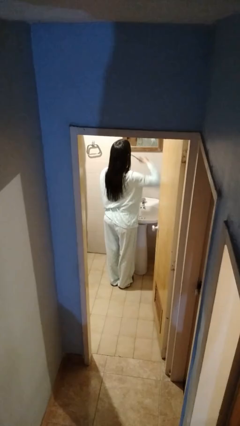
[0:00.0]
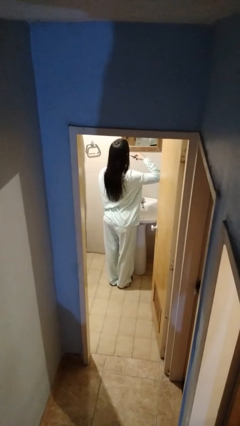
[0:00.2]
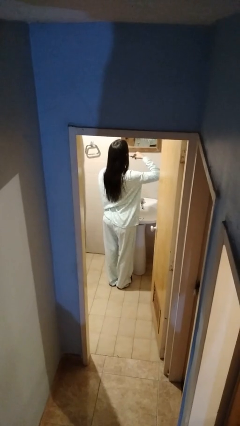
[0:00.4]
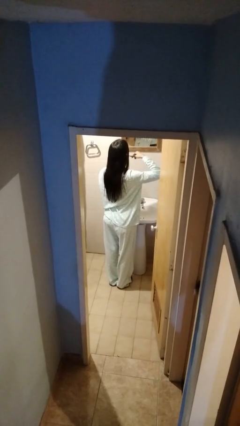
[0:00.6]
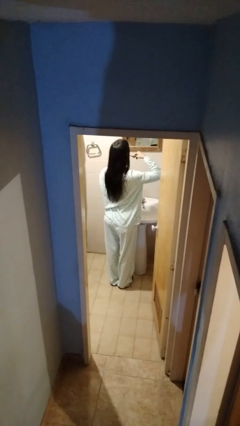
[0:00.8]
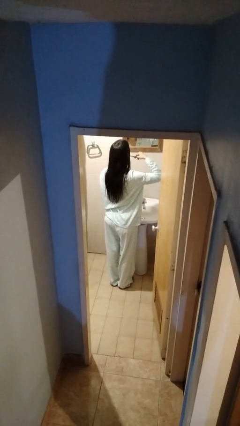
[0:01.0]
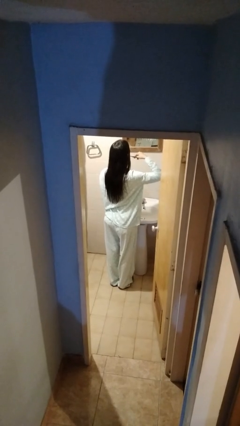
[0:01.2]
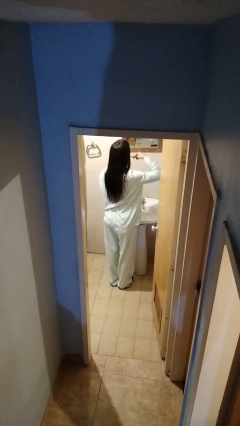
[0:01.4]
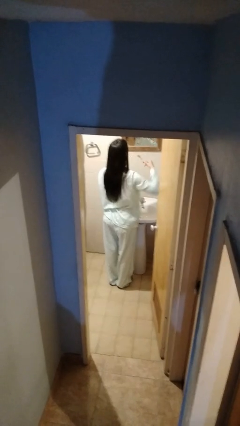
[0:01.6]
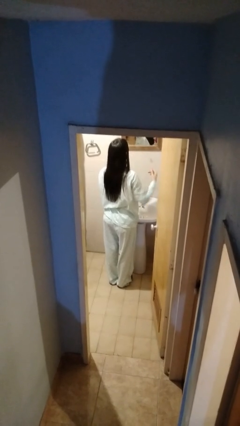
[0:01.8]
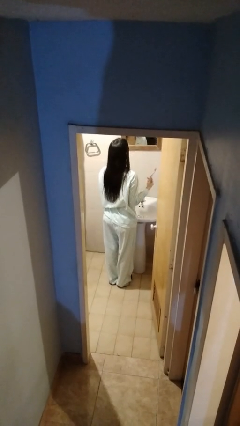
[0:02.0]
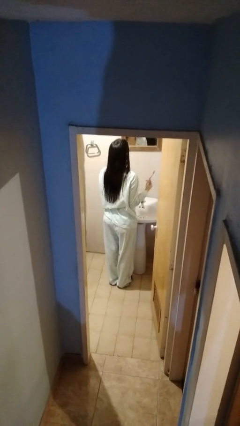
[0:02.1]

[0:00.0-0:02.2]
person brushes teeth

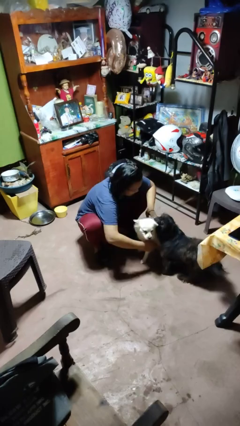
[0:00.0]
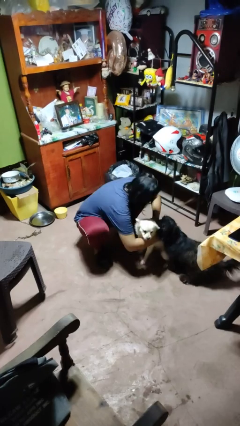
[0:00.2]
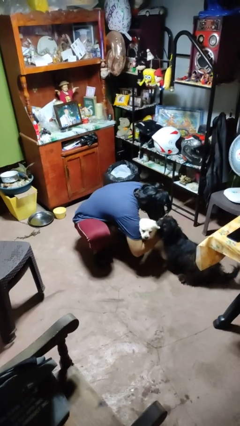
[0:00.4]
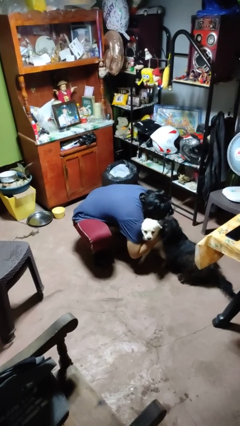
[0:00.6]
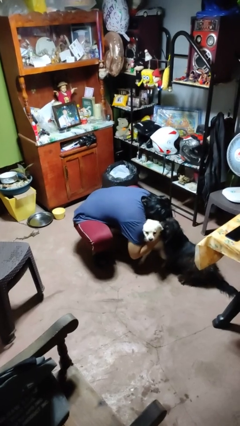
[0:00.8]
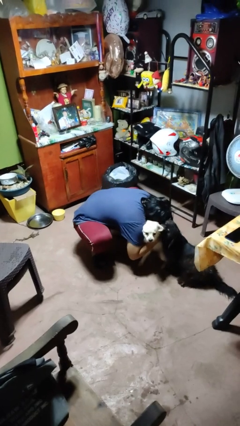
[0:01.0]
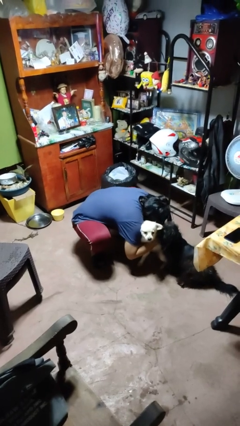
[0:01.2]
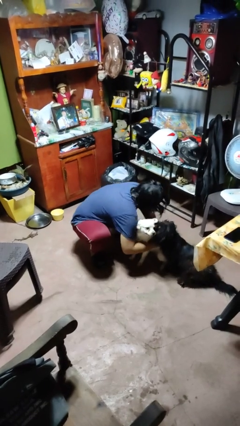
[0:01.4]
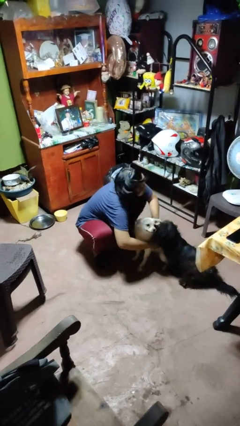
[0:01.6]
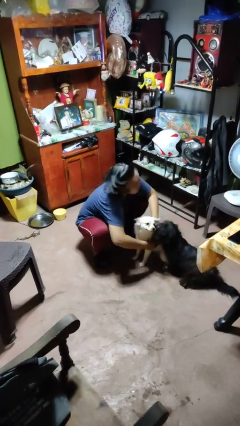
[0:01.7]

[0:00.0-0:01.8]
person hugs dog

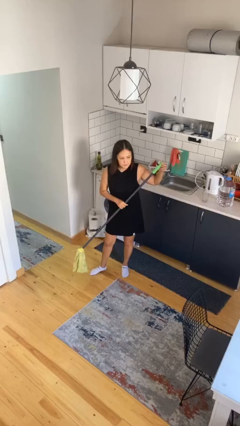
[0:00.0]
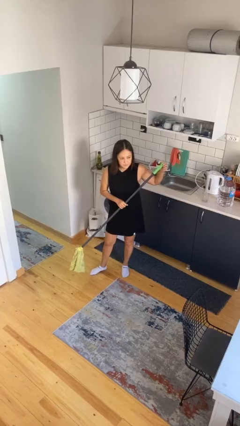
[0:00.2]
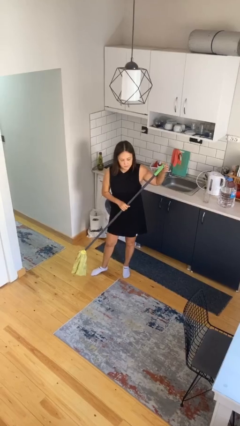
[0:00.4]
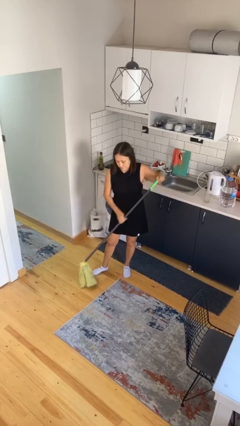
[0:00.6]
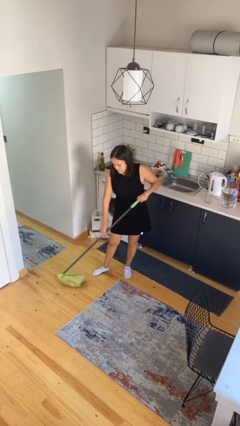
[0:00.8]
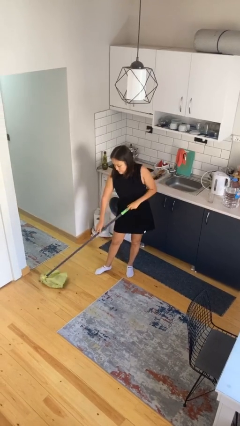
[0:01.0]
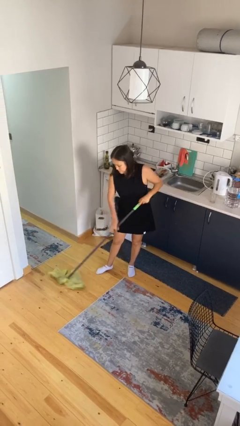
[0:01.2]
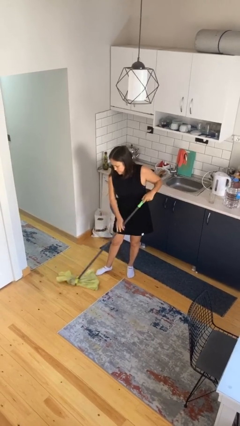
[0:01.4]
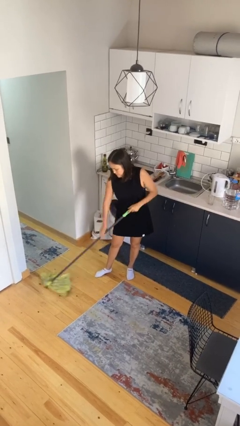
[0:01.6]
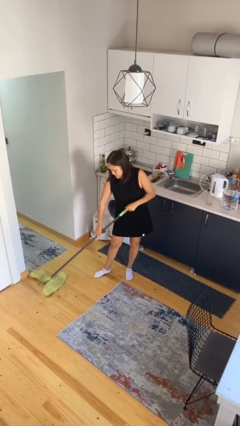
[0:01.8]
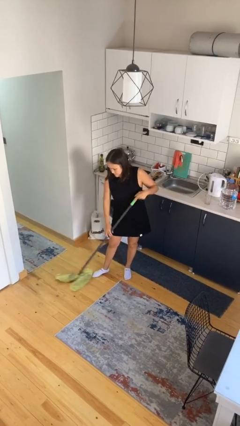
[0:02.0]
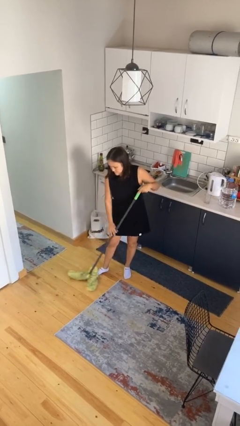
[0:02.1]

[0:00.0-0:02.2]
person sweeps floor

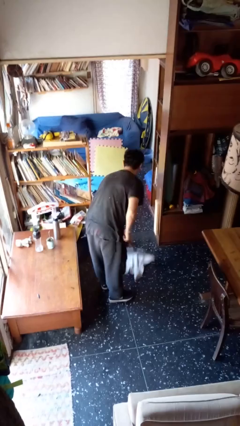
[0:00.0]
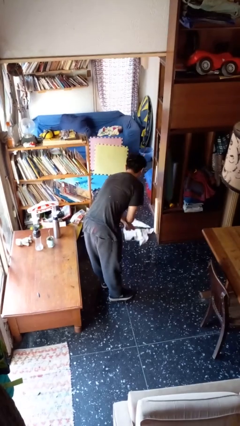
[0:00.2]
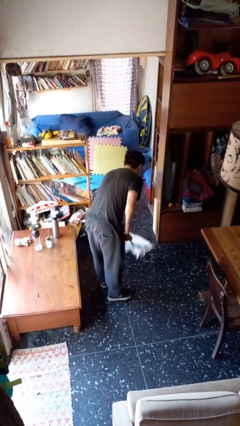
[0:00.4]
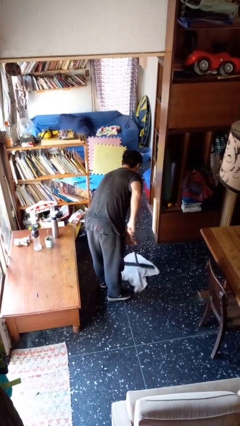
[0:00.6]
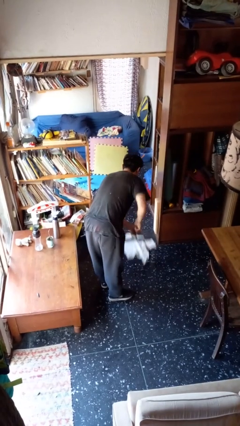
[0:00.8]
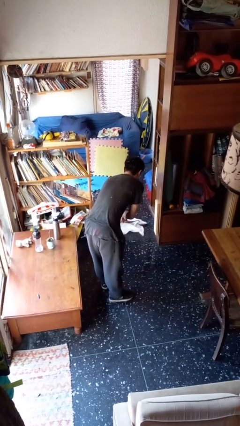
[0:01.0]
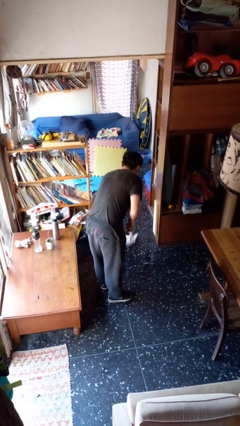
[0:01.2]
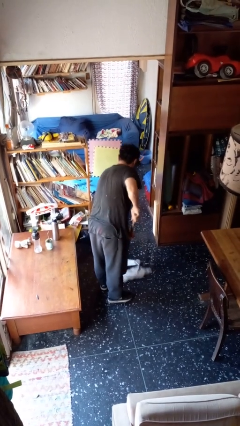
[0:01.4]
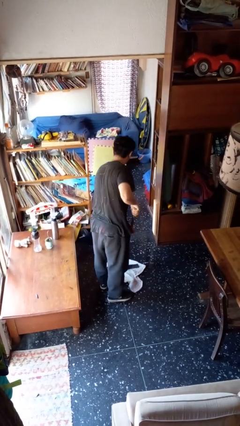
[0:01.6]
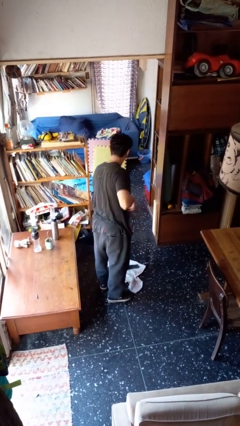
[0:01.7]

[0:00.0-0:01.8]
person mops

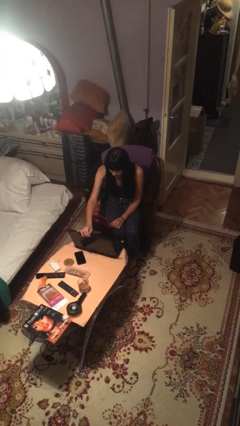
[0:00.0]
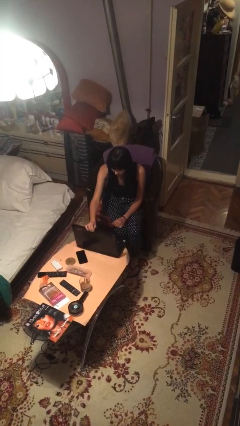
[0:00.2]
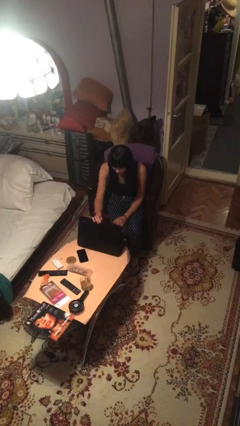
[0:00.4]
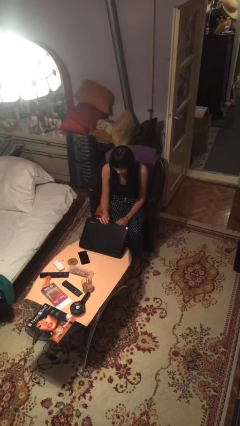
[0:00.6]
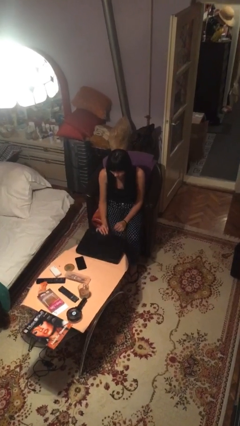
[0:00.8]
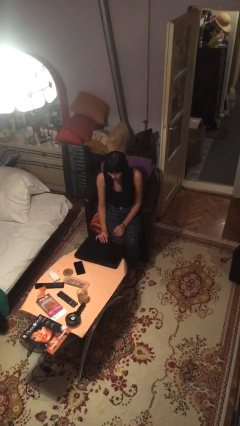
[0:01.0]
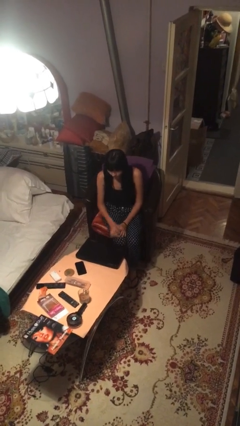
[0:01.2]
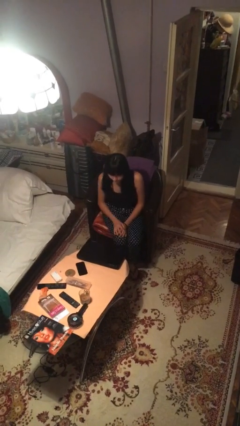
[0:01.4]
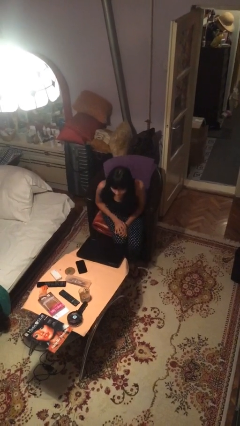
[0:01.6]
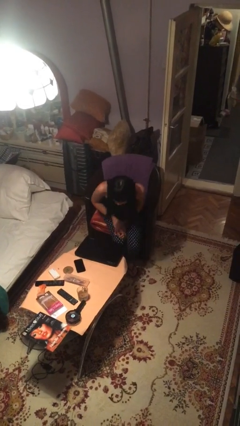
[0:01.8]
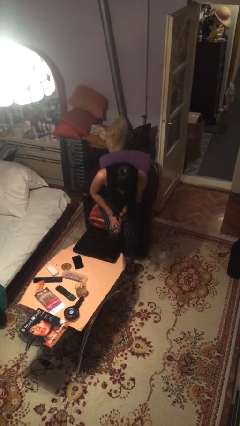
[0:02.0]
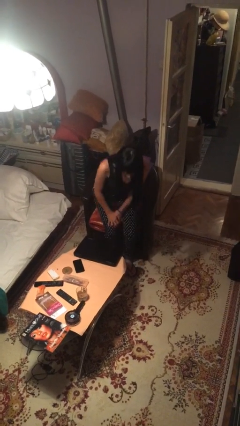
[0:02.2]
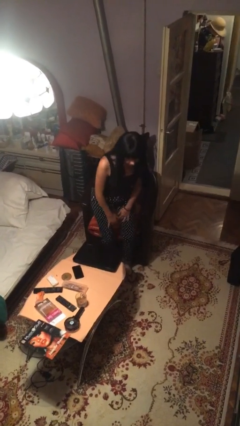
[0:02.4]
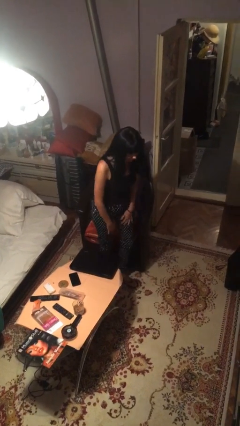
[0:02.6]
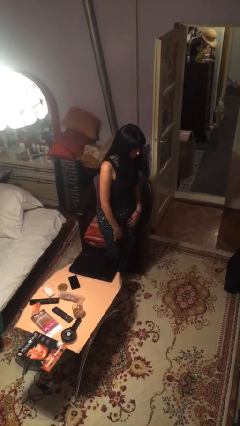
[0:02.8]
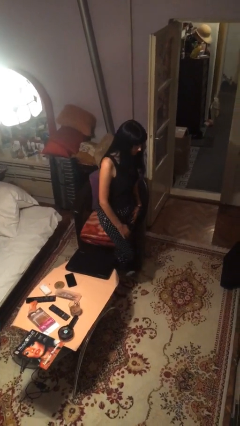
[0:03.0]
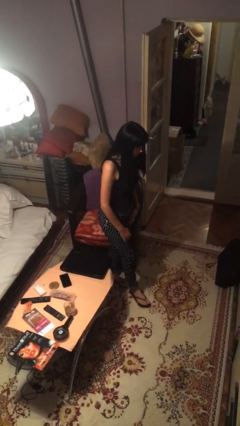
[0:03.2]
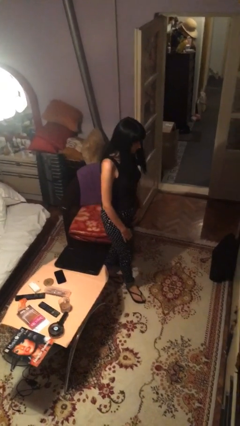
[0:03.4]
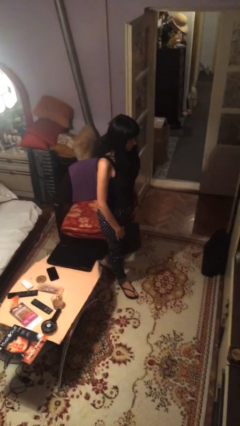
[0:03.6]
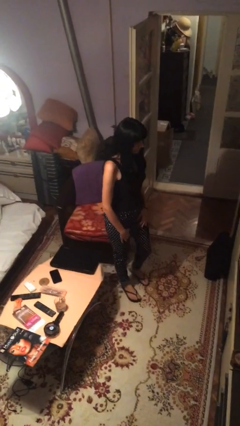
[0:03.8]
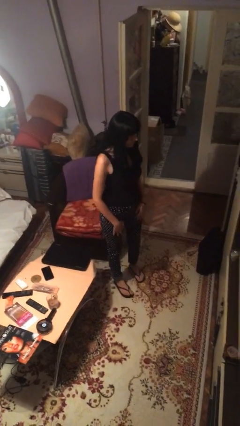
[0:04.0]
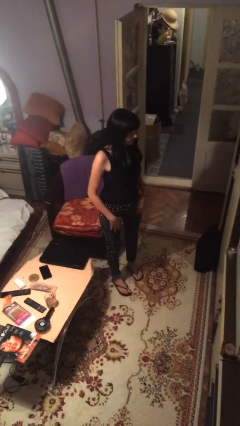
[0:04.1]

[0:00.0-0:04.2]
person stands up

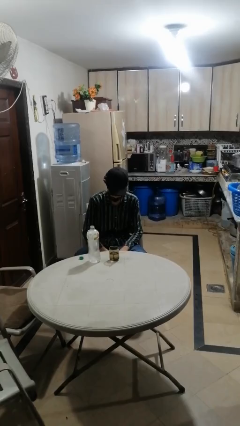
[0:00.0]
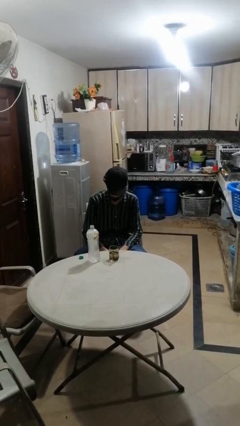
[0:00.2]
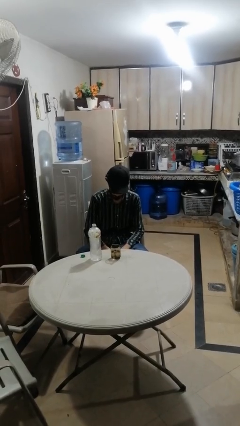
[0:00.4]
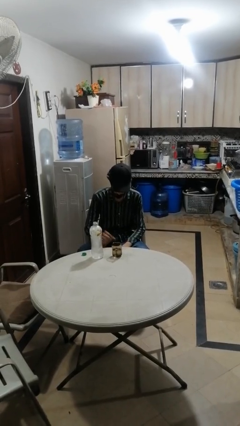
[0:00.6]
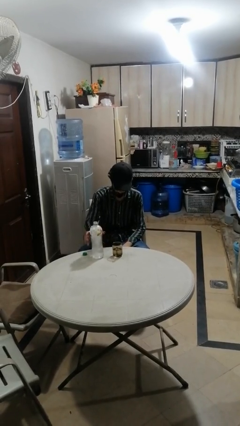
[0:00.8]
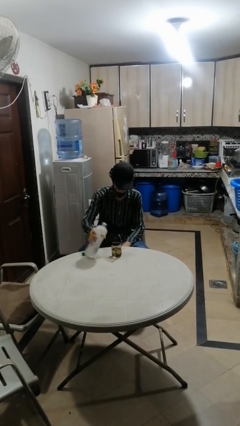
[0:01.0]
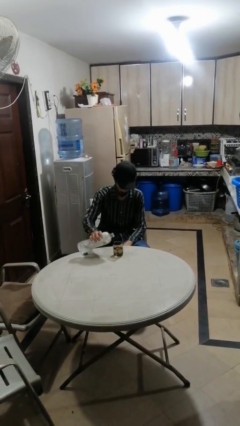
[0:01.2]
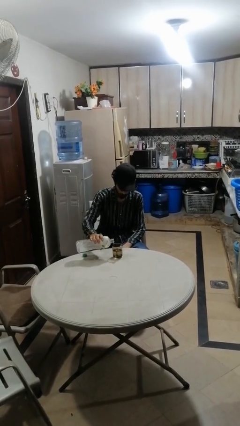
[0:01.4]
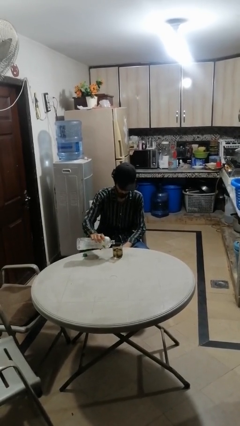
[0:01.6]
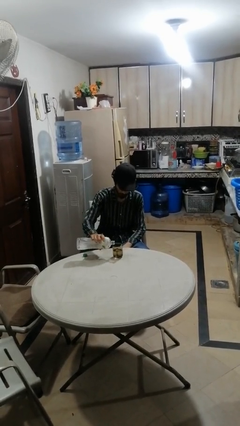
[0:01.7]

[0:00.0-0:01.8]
person pours liquid into cup

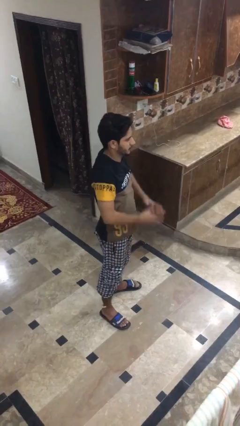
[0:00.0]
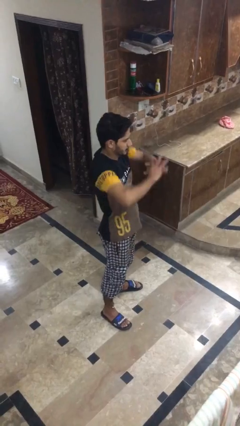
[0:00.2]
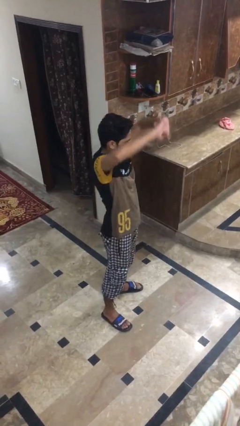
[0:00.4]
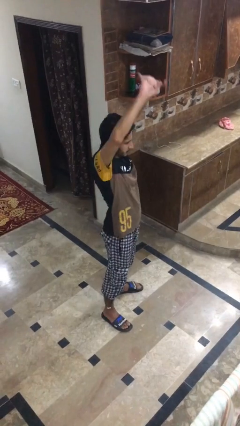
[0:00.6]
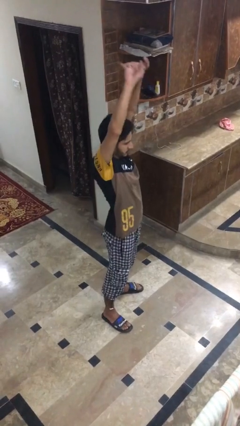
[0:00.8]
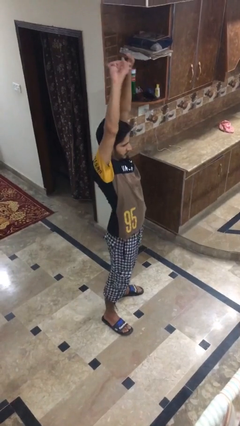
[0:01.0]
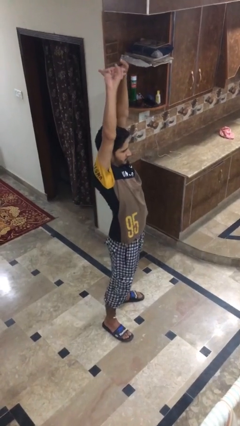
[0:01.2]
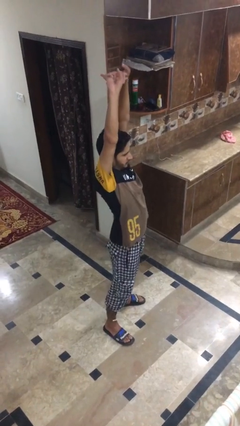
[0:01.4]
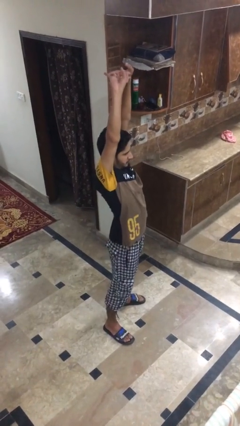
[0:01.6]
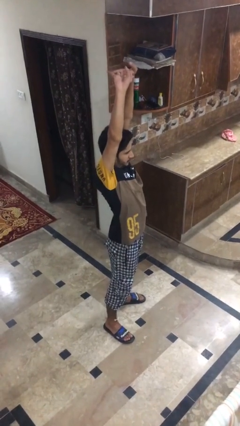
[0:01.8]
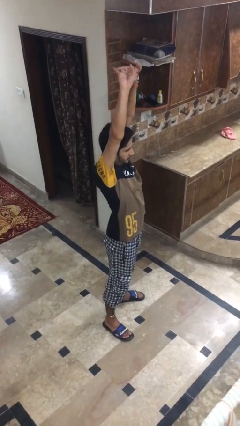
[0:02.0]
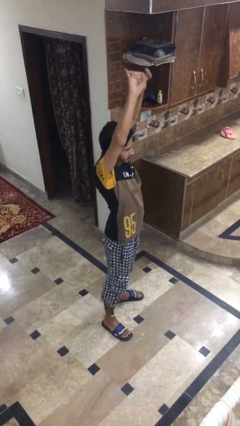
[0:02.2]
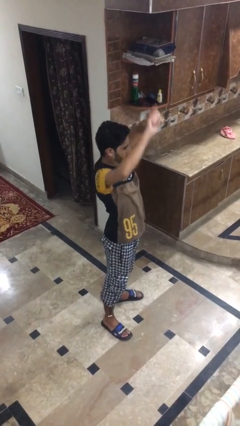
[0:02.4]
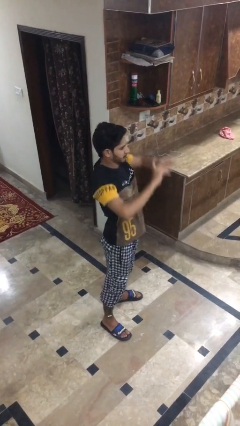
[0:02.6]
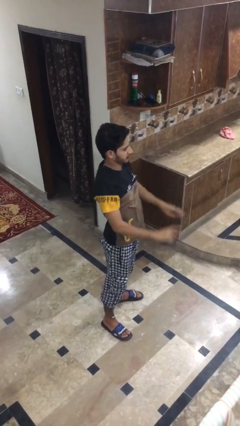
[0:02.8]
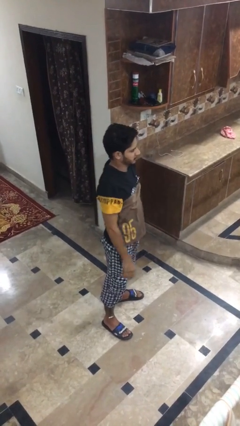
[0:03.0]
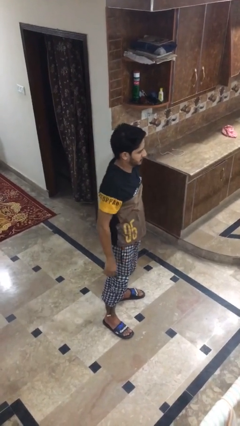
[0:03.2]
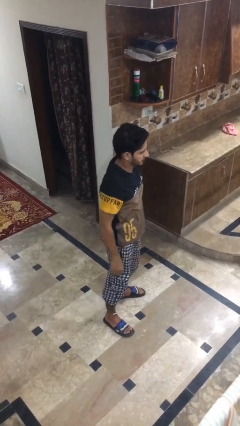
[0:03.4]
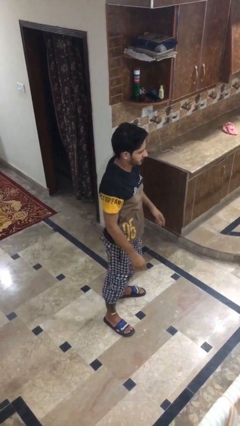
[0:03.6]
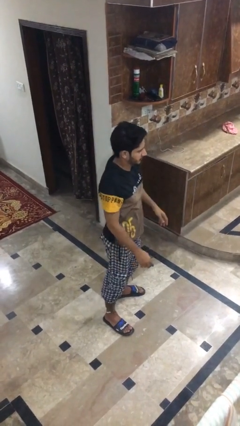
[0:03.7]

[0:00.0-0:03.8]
person stretches arms over head
